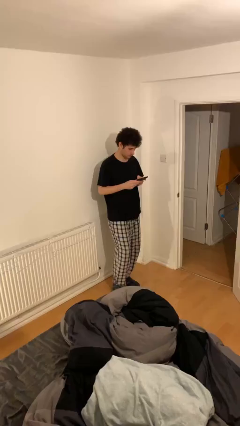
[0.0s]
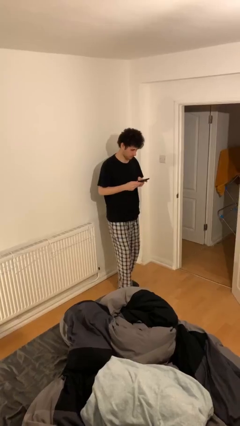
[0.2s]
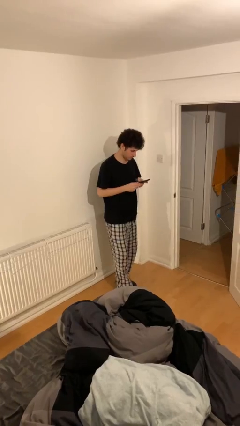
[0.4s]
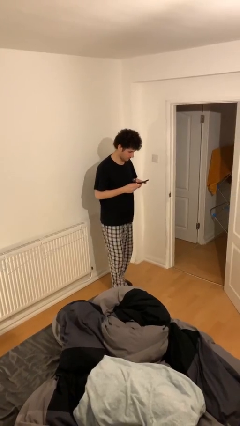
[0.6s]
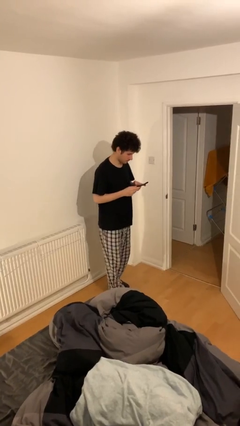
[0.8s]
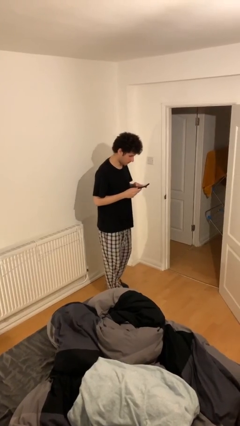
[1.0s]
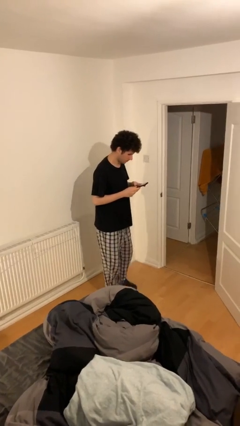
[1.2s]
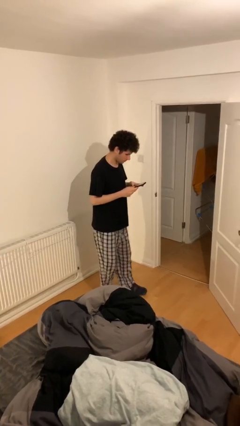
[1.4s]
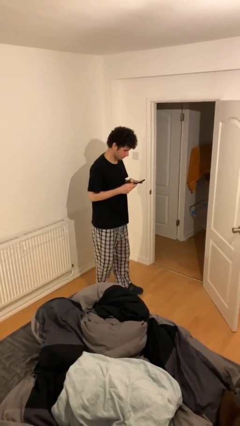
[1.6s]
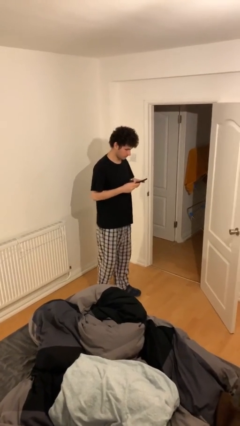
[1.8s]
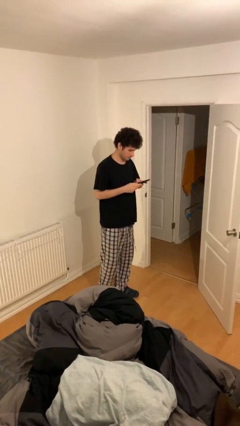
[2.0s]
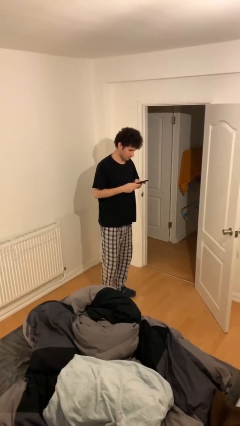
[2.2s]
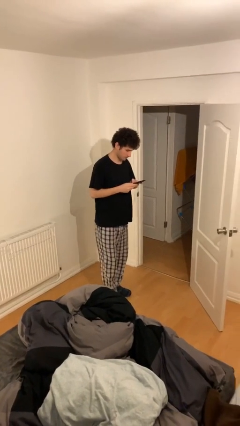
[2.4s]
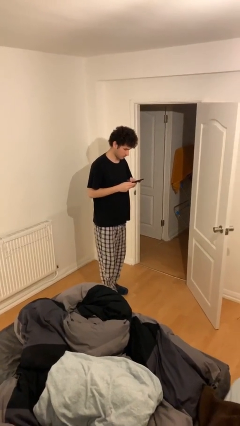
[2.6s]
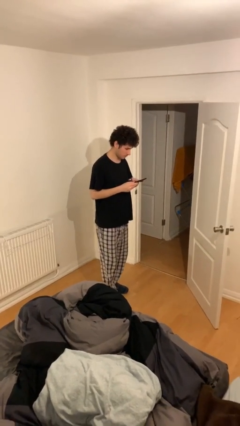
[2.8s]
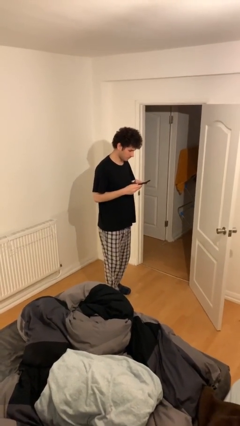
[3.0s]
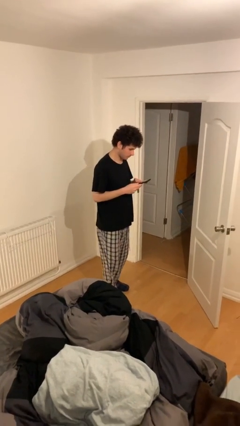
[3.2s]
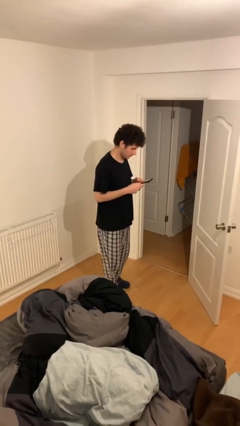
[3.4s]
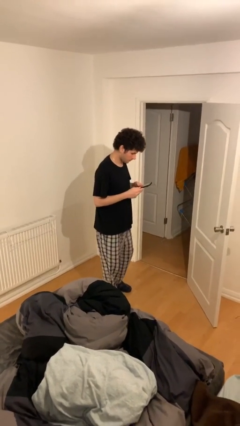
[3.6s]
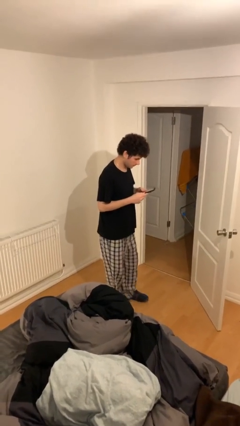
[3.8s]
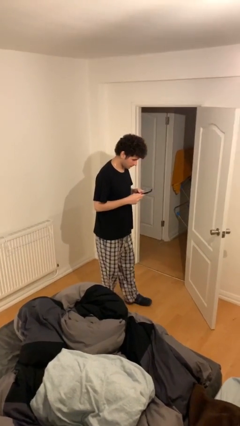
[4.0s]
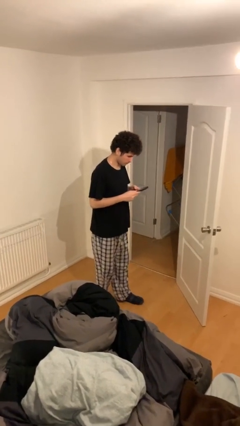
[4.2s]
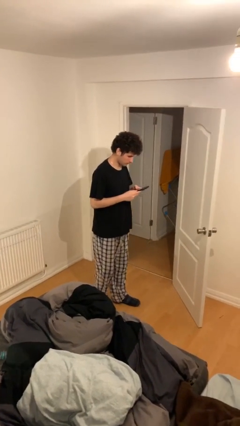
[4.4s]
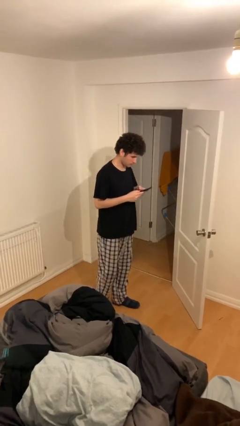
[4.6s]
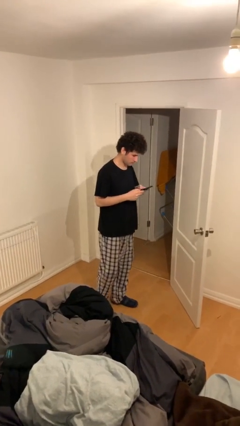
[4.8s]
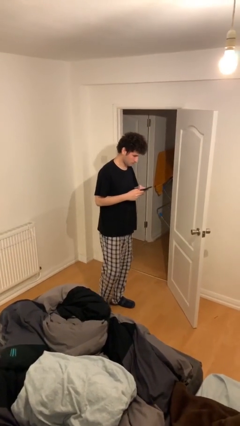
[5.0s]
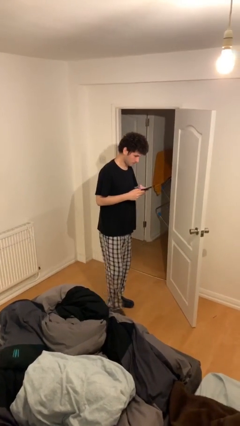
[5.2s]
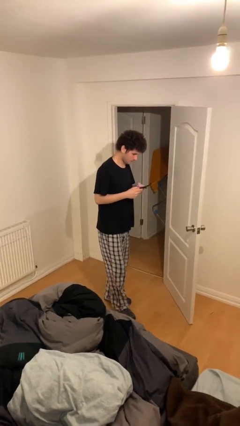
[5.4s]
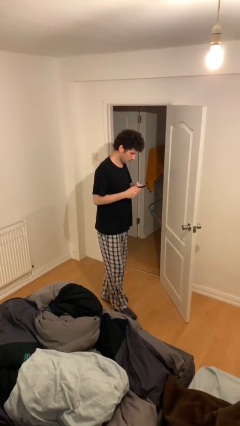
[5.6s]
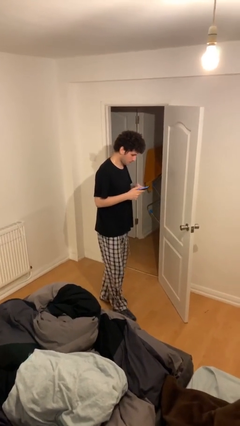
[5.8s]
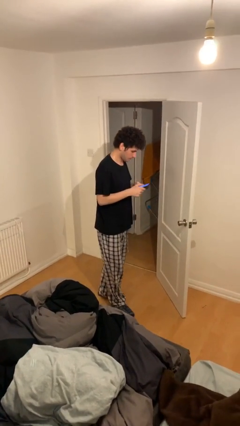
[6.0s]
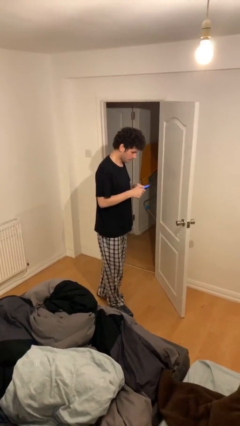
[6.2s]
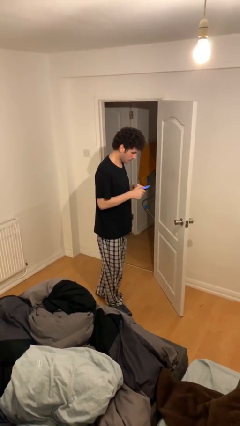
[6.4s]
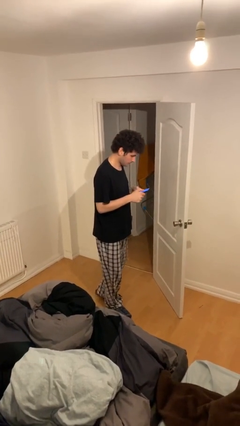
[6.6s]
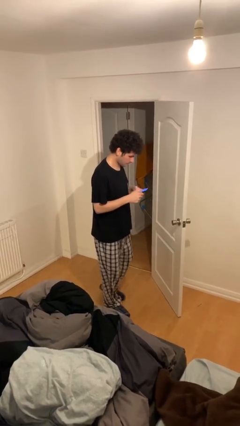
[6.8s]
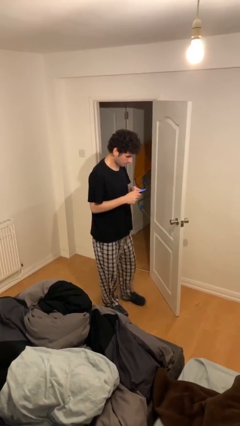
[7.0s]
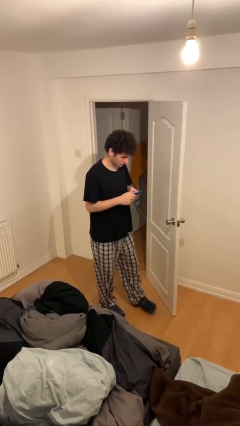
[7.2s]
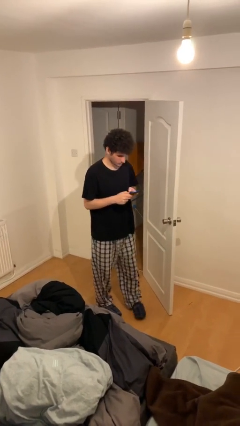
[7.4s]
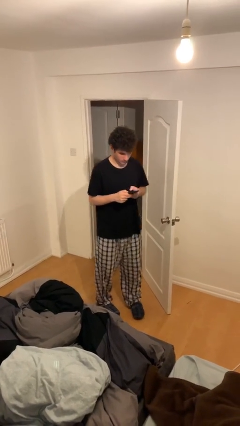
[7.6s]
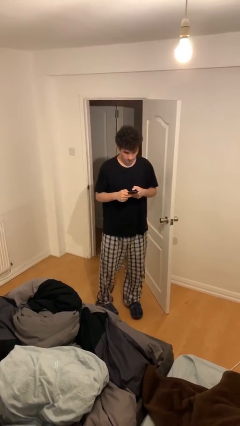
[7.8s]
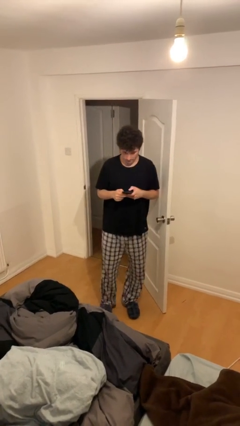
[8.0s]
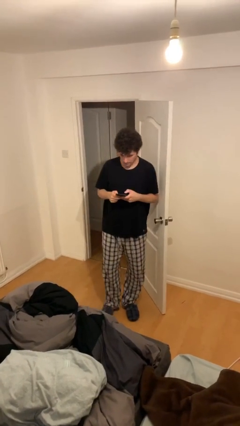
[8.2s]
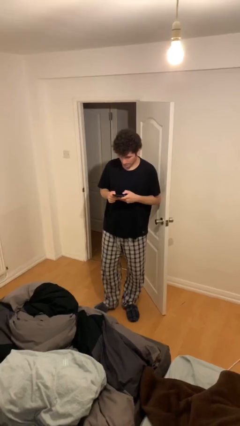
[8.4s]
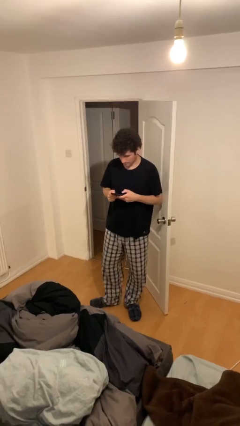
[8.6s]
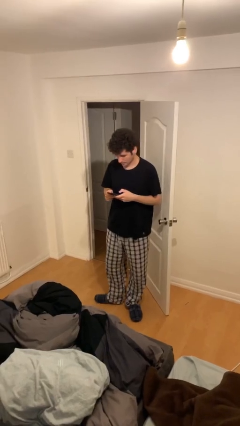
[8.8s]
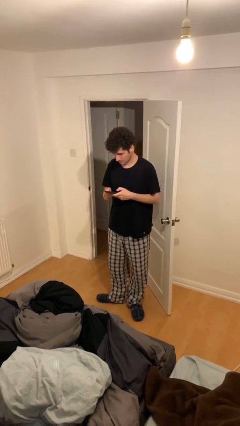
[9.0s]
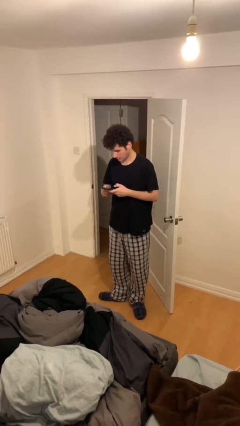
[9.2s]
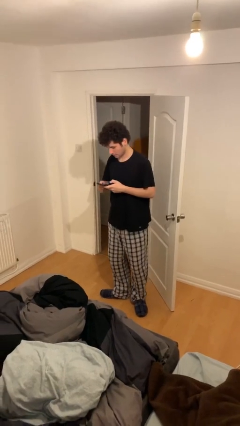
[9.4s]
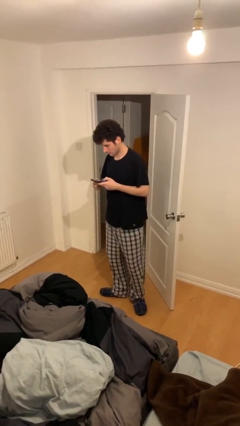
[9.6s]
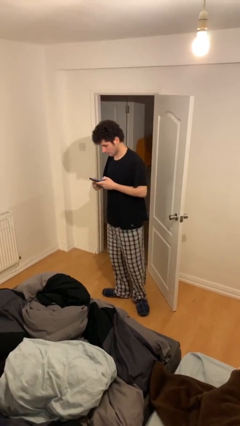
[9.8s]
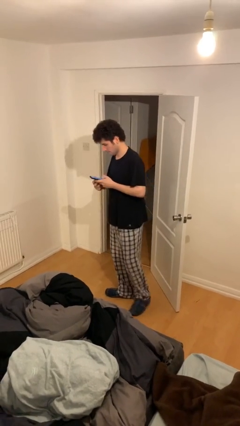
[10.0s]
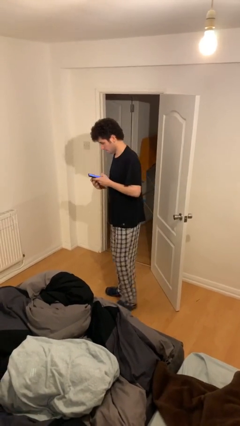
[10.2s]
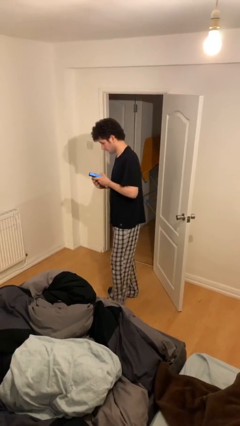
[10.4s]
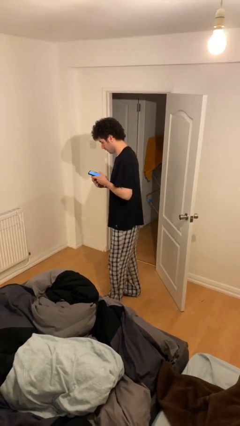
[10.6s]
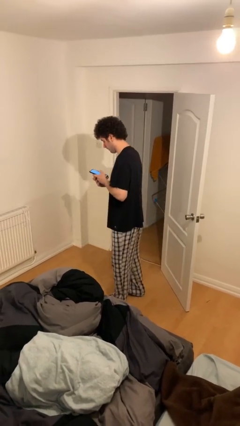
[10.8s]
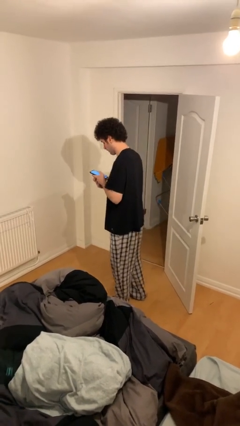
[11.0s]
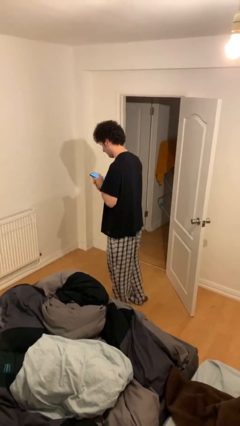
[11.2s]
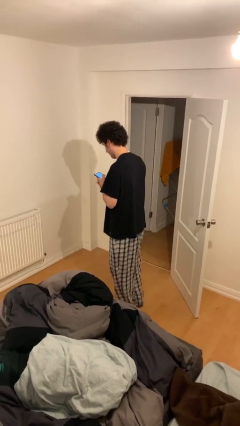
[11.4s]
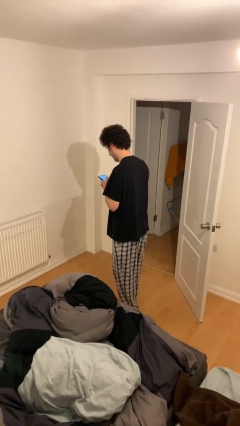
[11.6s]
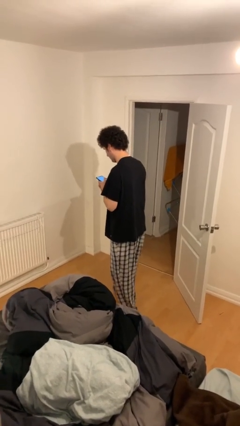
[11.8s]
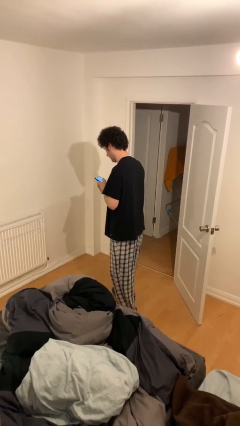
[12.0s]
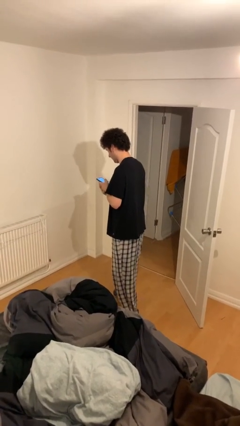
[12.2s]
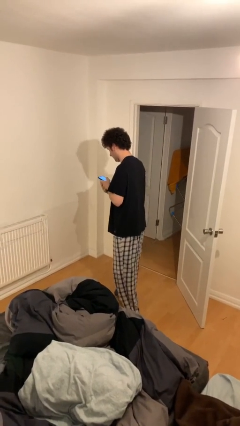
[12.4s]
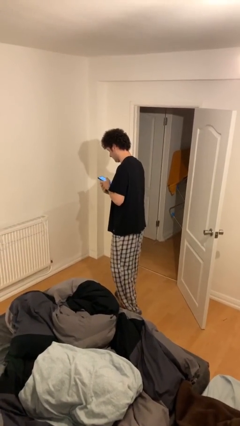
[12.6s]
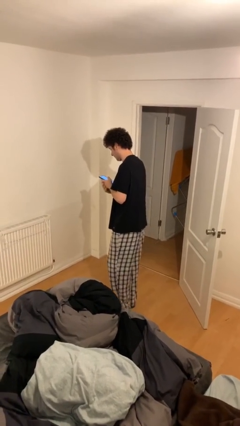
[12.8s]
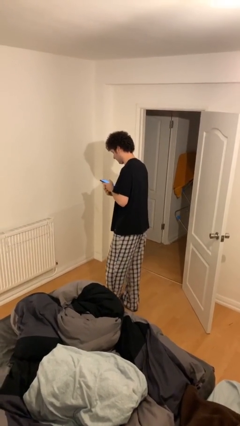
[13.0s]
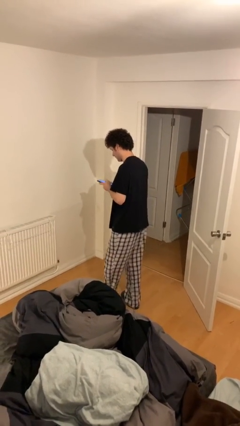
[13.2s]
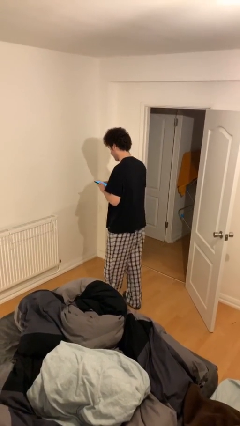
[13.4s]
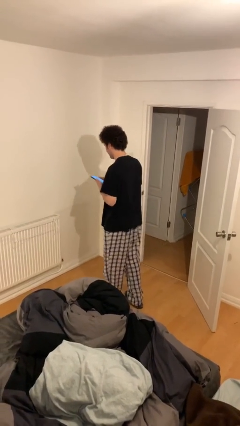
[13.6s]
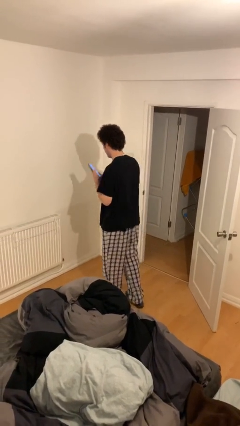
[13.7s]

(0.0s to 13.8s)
person texts on phone

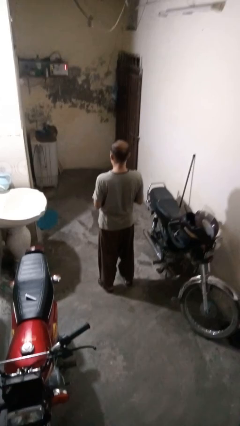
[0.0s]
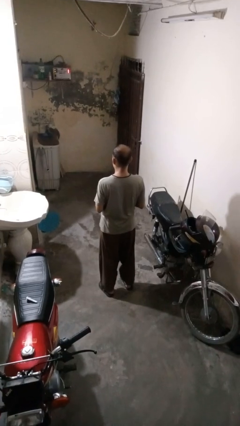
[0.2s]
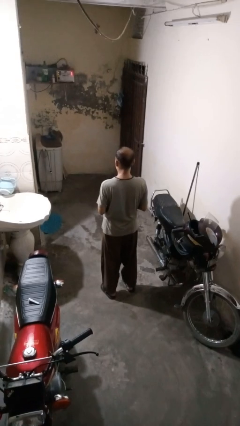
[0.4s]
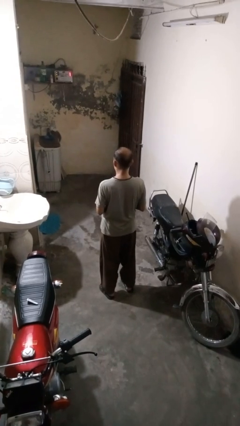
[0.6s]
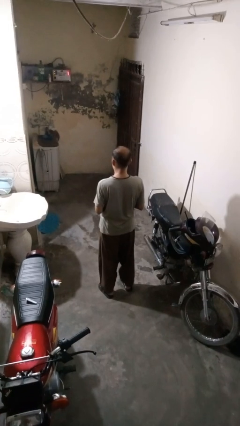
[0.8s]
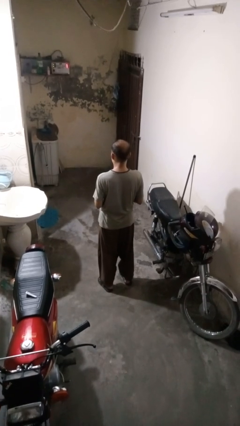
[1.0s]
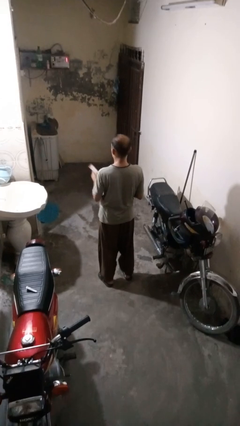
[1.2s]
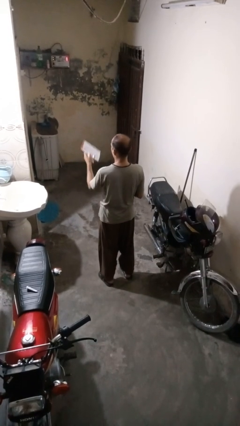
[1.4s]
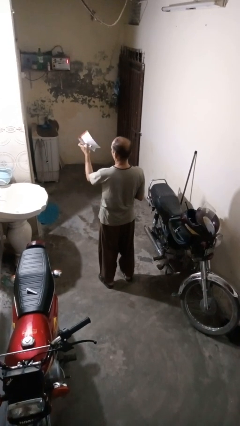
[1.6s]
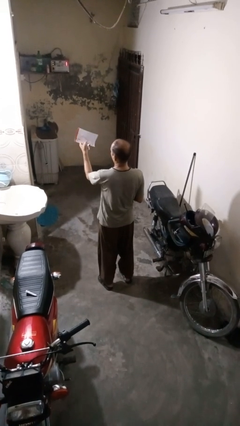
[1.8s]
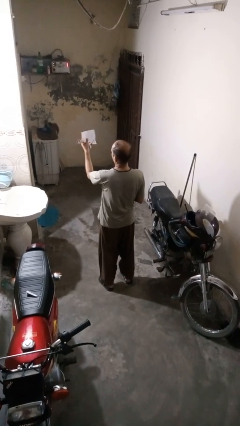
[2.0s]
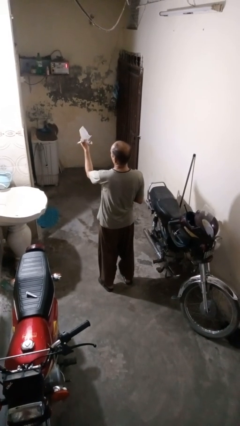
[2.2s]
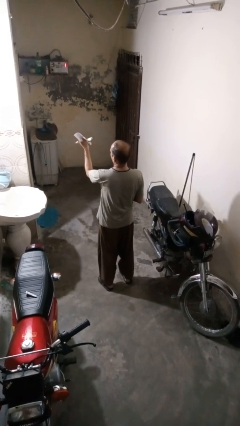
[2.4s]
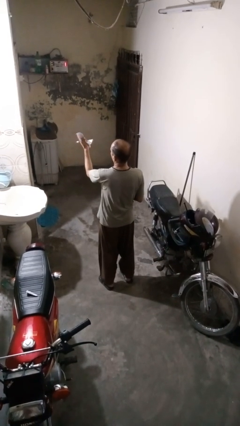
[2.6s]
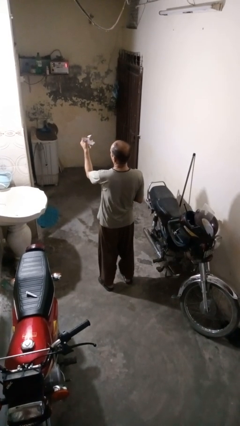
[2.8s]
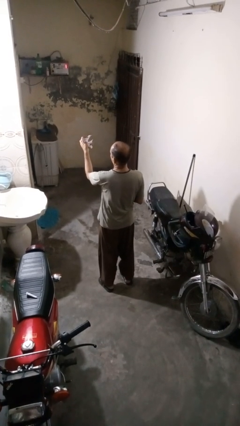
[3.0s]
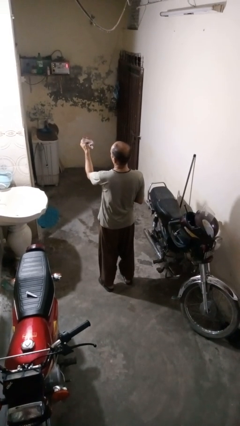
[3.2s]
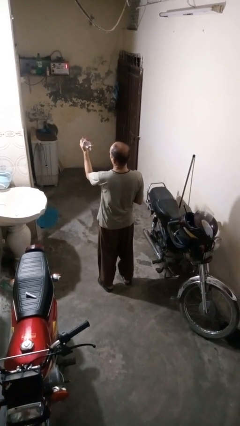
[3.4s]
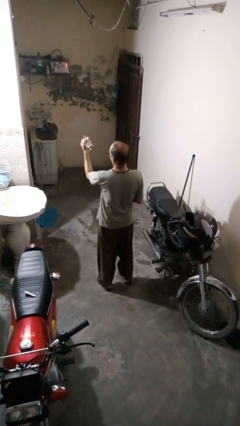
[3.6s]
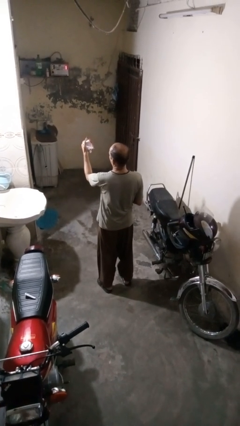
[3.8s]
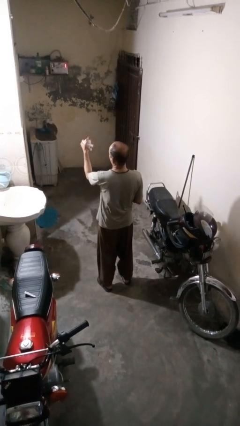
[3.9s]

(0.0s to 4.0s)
person crumples paper
